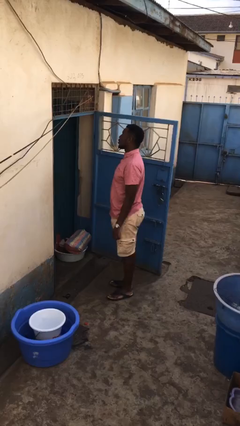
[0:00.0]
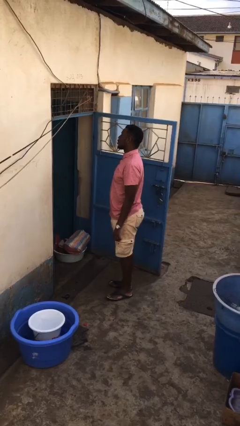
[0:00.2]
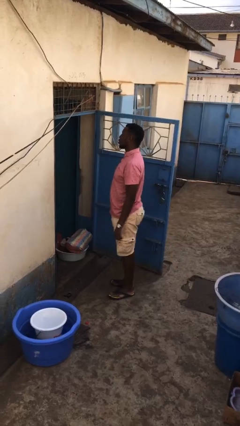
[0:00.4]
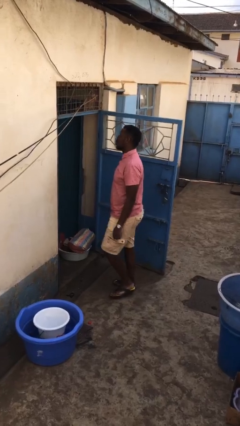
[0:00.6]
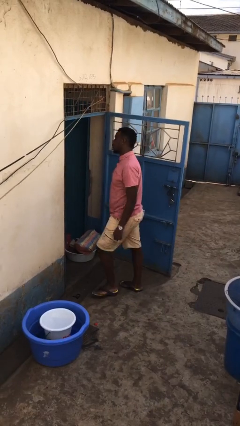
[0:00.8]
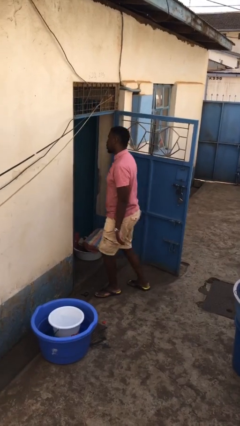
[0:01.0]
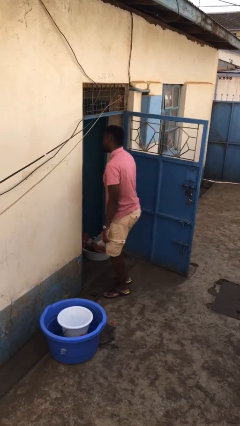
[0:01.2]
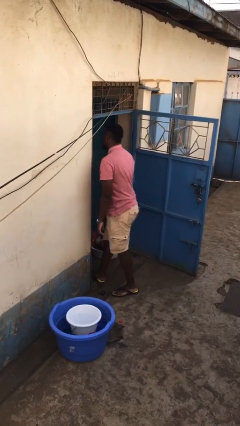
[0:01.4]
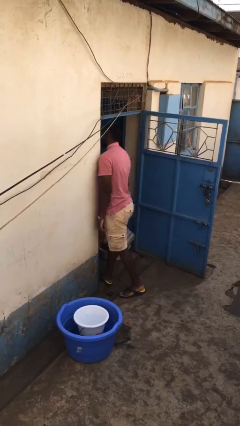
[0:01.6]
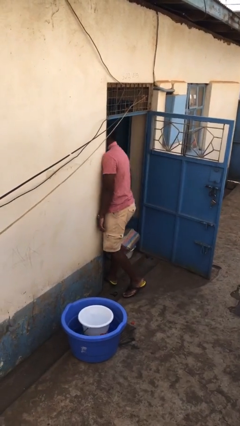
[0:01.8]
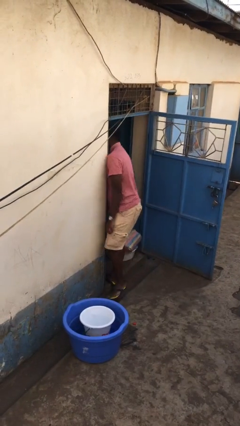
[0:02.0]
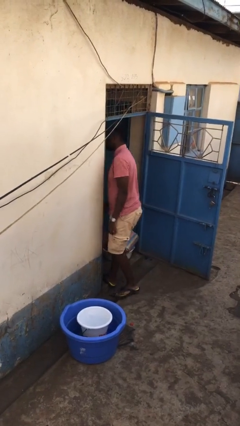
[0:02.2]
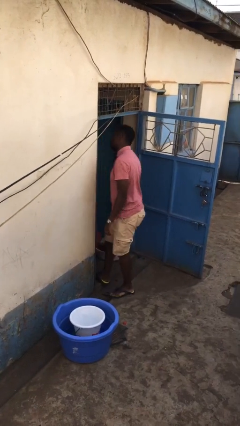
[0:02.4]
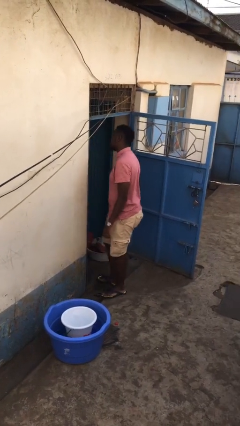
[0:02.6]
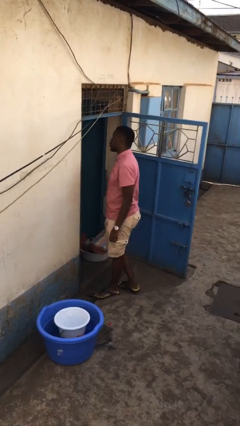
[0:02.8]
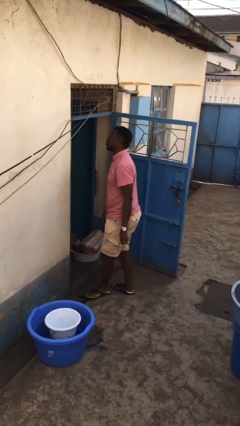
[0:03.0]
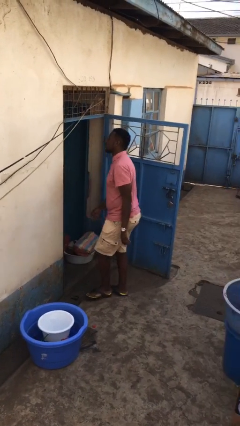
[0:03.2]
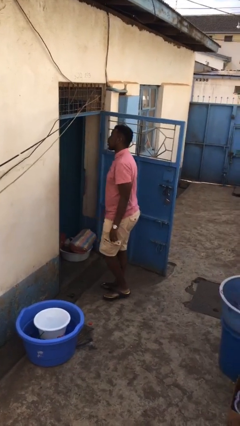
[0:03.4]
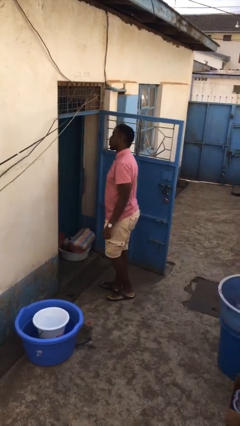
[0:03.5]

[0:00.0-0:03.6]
person bumps into wall

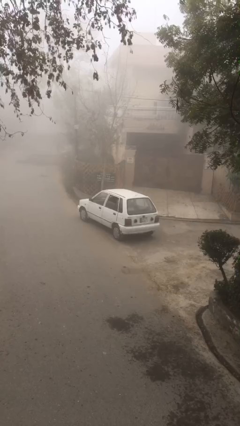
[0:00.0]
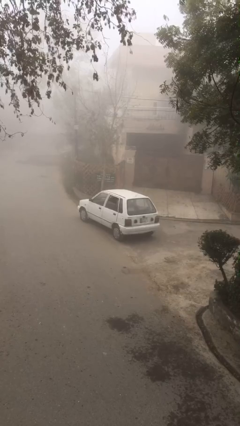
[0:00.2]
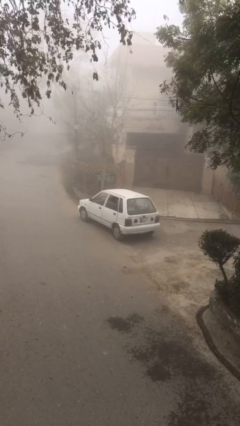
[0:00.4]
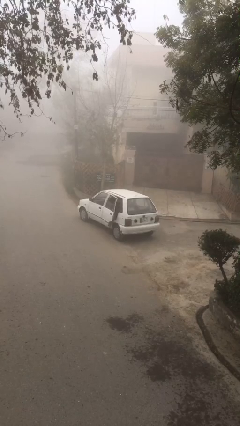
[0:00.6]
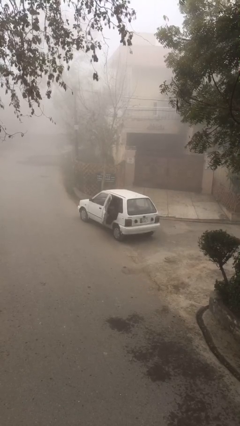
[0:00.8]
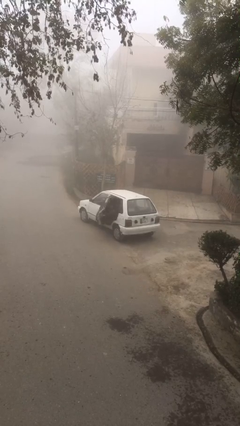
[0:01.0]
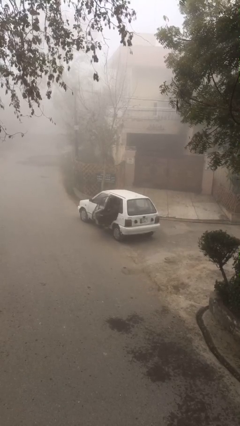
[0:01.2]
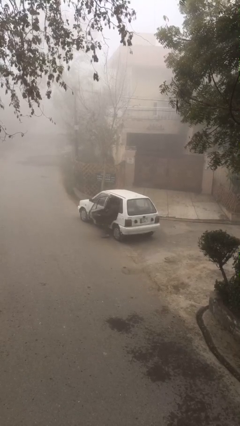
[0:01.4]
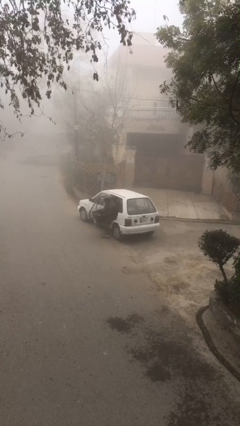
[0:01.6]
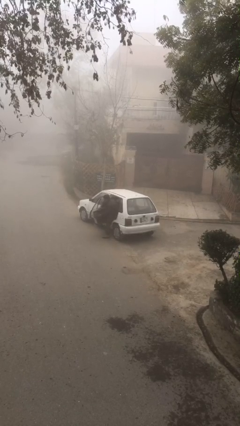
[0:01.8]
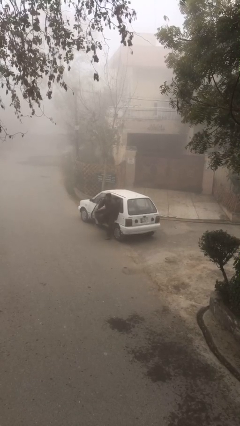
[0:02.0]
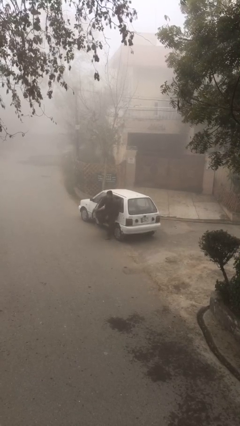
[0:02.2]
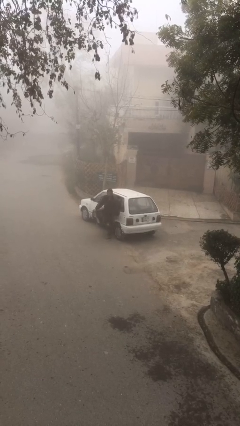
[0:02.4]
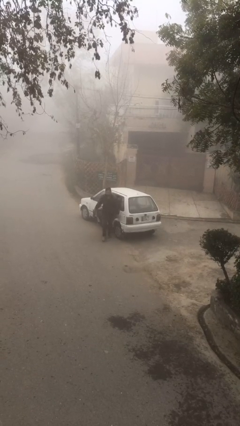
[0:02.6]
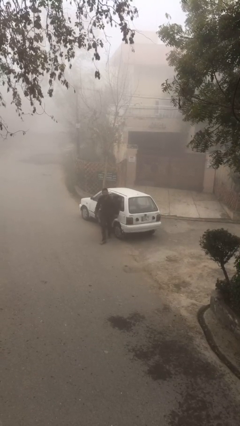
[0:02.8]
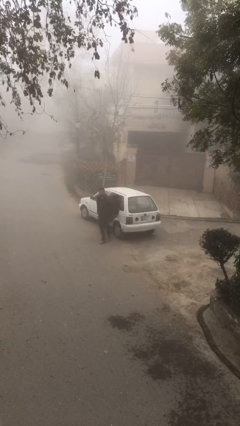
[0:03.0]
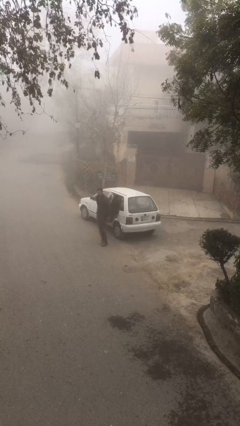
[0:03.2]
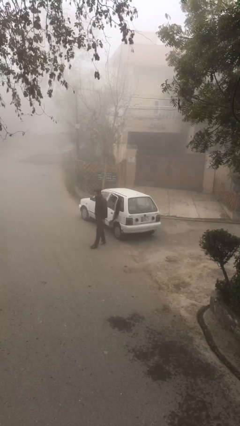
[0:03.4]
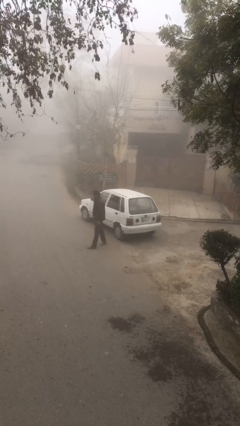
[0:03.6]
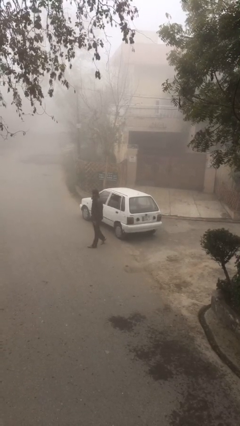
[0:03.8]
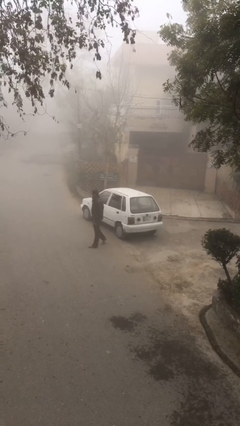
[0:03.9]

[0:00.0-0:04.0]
car drops off person

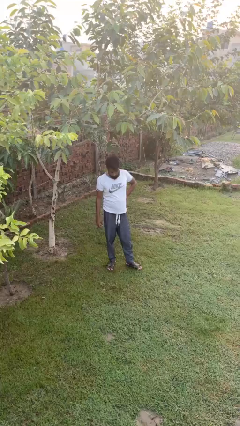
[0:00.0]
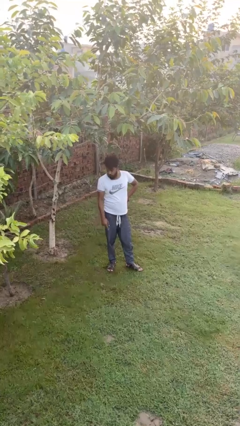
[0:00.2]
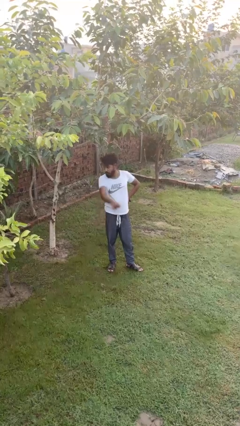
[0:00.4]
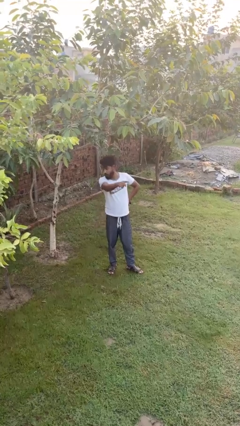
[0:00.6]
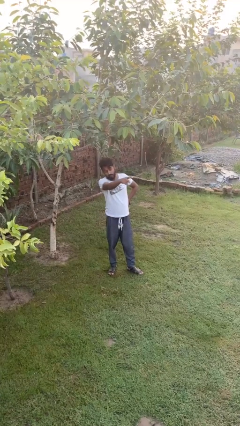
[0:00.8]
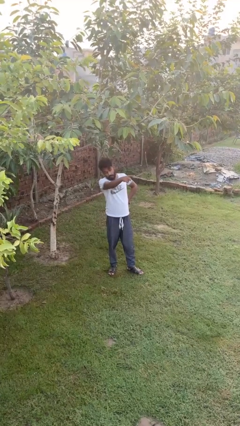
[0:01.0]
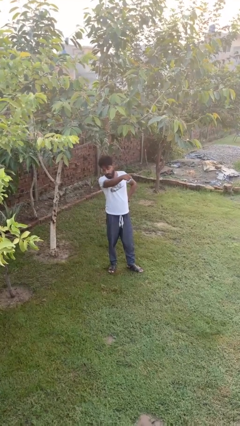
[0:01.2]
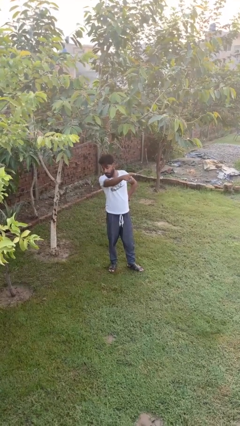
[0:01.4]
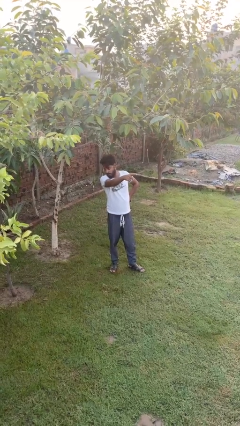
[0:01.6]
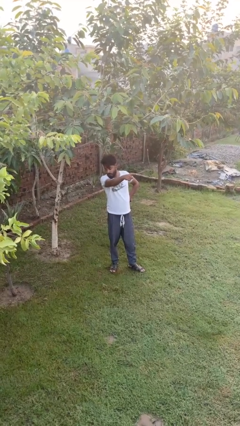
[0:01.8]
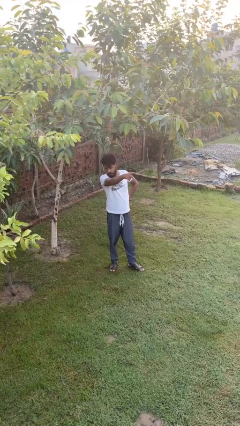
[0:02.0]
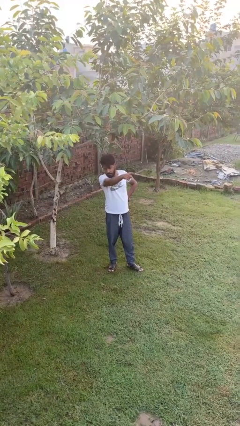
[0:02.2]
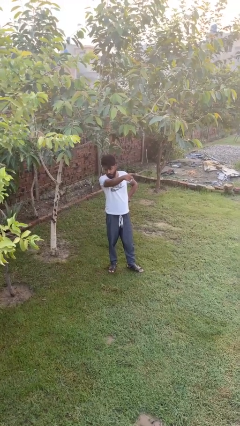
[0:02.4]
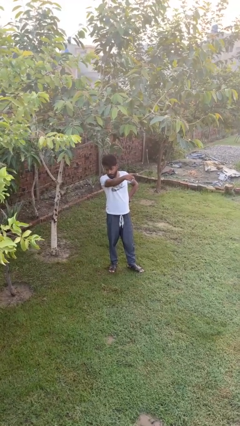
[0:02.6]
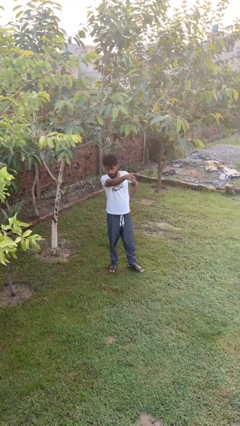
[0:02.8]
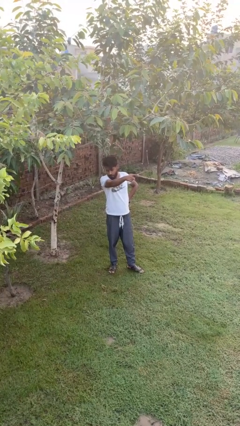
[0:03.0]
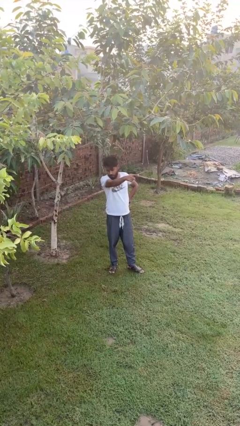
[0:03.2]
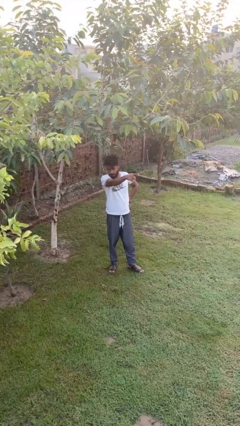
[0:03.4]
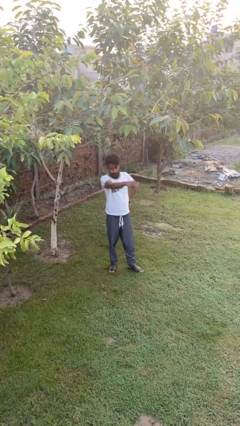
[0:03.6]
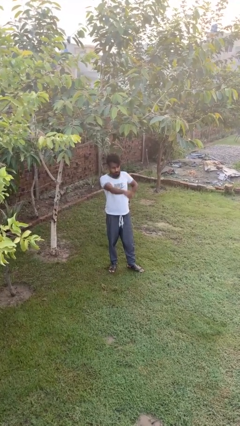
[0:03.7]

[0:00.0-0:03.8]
person points at person

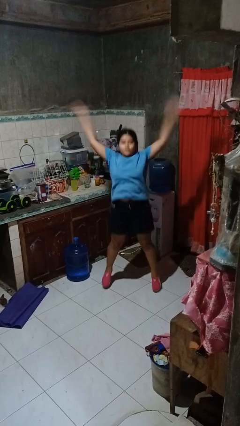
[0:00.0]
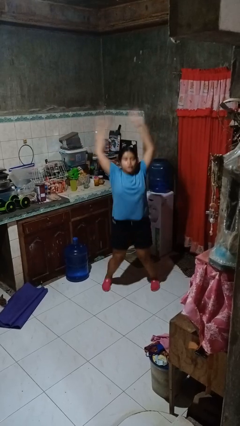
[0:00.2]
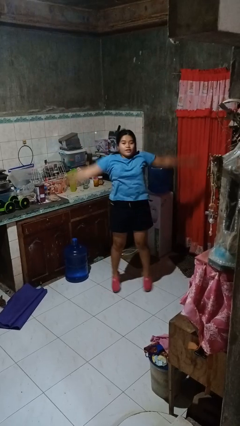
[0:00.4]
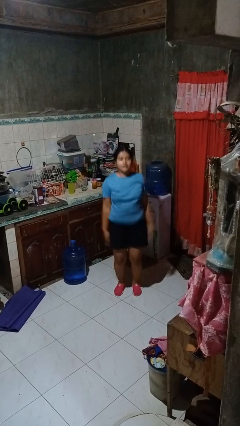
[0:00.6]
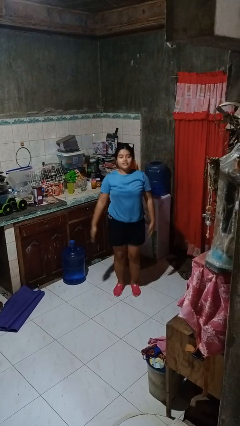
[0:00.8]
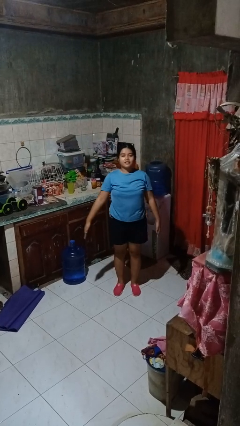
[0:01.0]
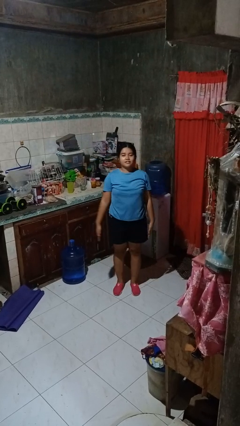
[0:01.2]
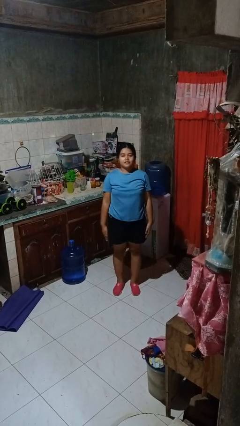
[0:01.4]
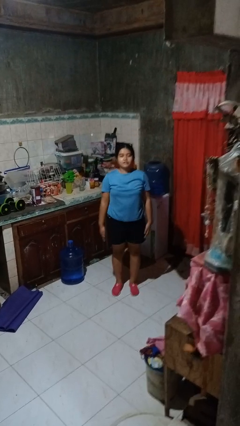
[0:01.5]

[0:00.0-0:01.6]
person exercises with jumping jacks

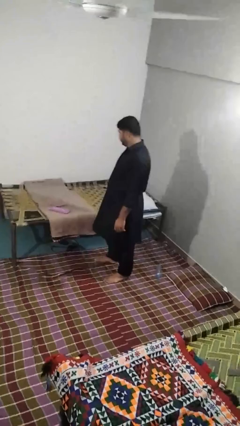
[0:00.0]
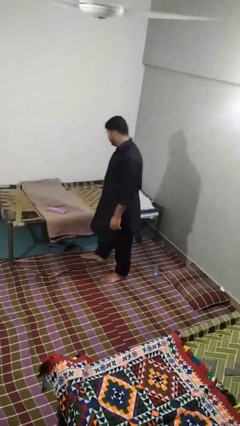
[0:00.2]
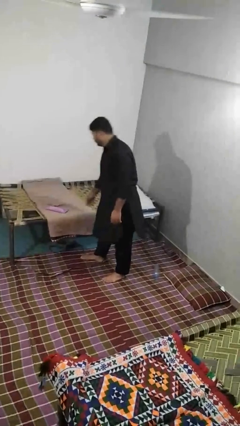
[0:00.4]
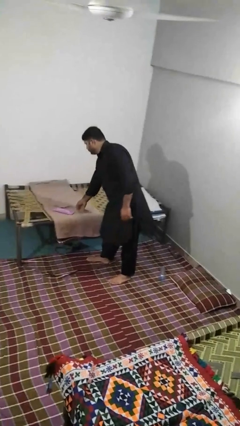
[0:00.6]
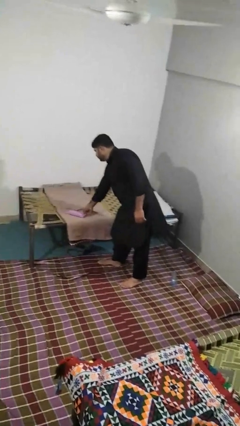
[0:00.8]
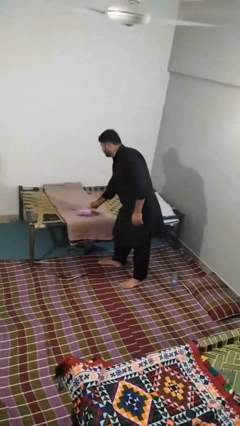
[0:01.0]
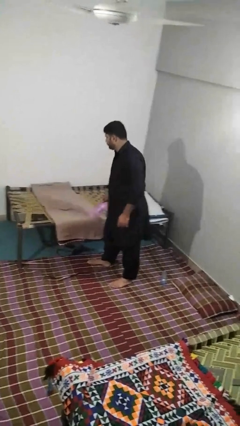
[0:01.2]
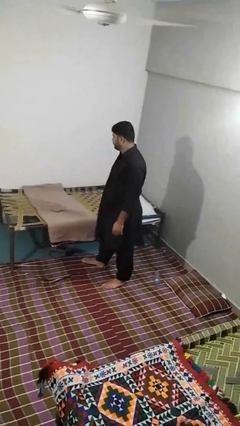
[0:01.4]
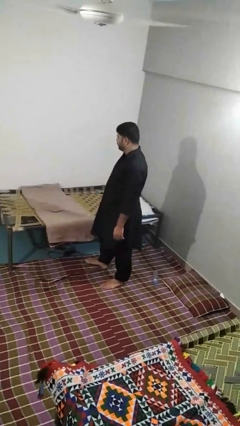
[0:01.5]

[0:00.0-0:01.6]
person picks up object from bed

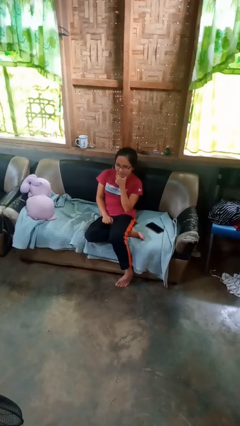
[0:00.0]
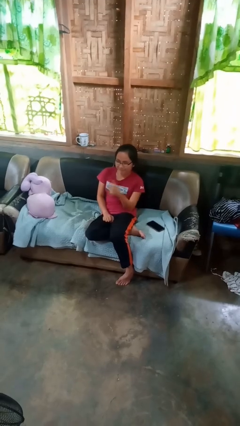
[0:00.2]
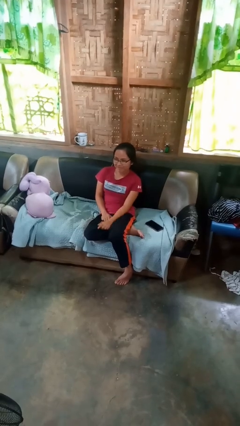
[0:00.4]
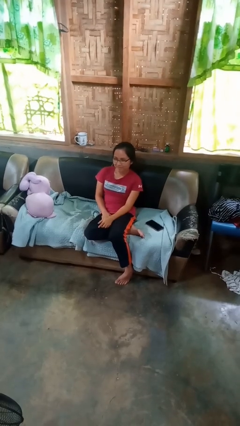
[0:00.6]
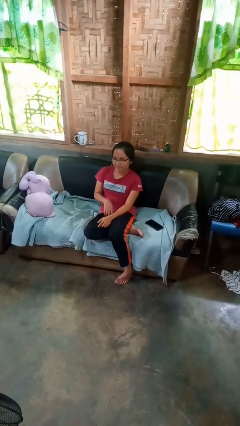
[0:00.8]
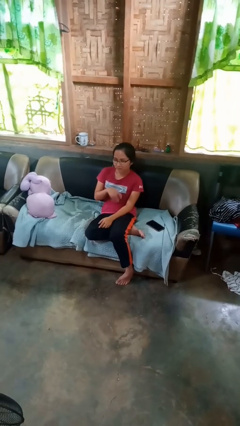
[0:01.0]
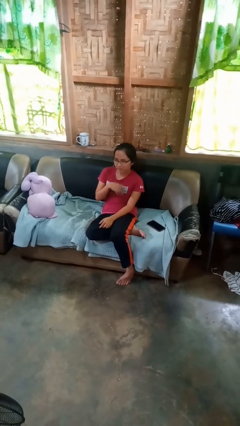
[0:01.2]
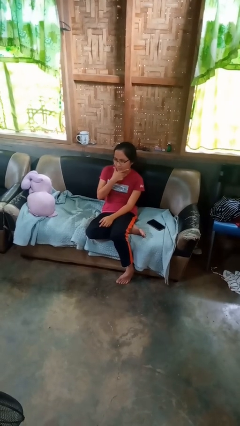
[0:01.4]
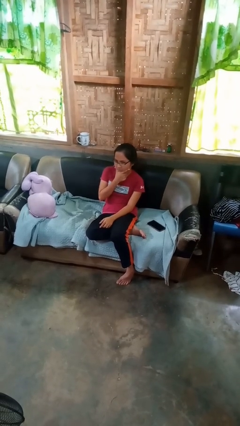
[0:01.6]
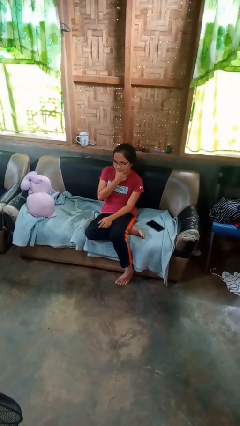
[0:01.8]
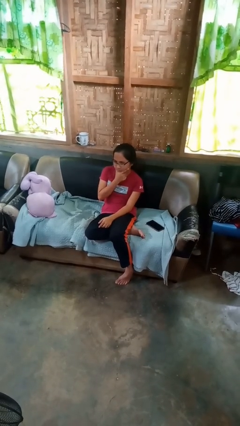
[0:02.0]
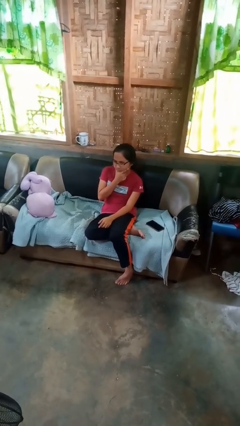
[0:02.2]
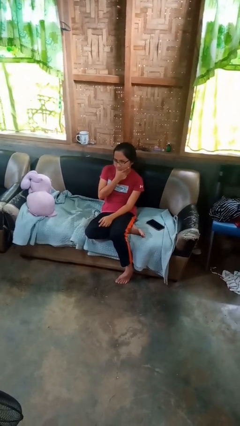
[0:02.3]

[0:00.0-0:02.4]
person strokes chin

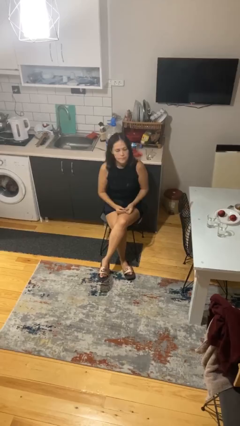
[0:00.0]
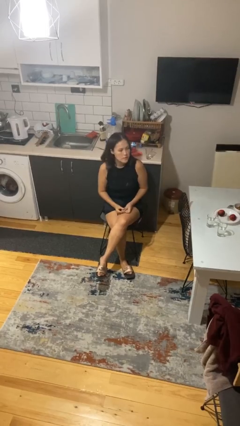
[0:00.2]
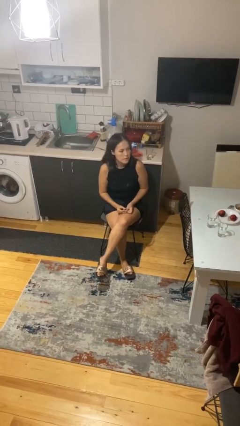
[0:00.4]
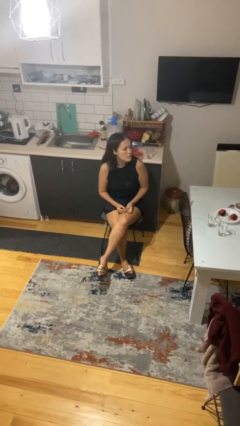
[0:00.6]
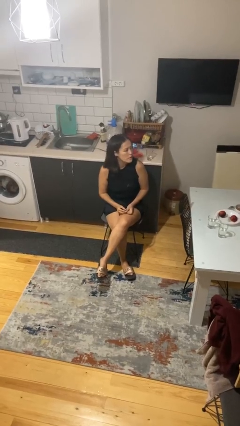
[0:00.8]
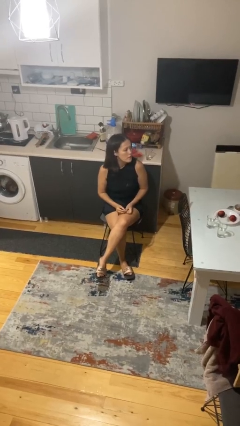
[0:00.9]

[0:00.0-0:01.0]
person takes off ring
